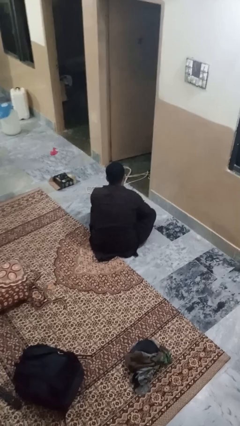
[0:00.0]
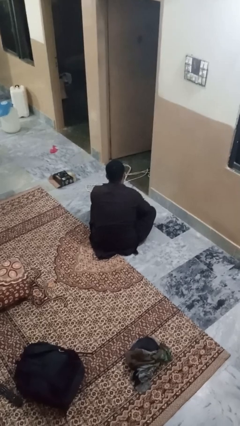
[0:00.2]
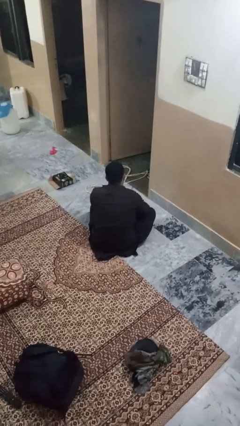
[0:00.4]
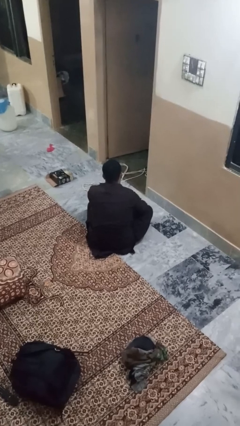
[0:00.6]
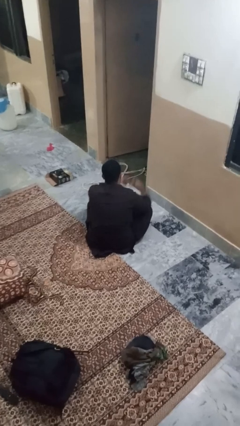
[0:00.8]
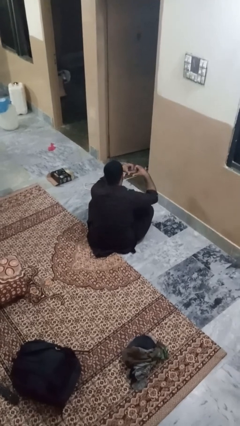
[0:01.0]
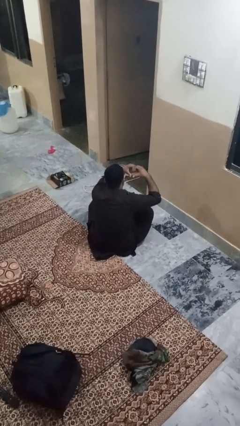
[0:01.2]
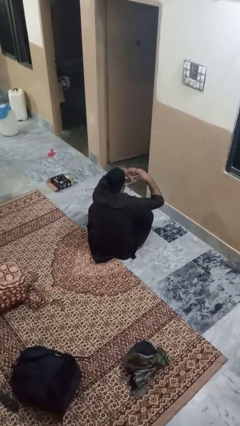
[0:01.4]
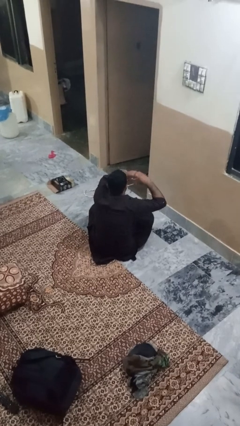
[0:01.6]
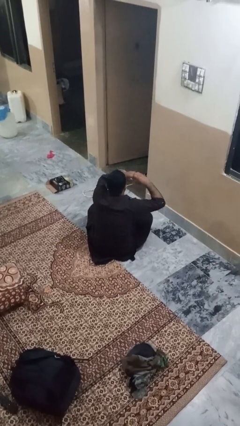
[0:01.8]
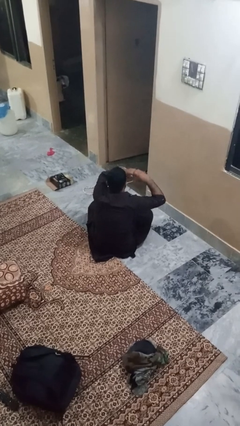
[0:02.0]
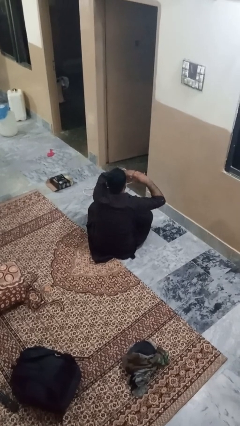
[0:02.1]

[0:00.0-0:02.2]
person gestures heart

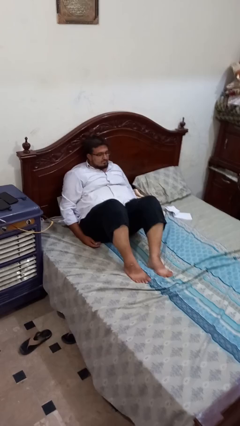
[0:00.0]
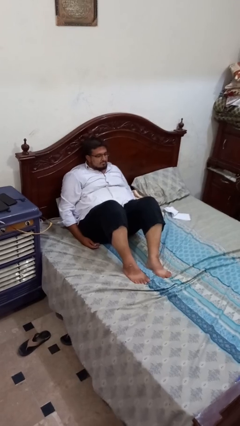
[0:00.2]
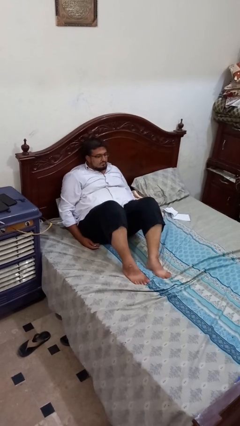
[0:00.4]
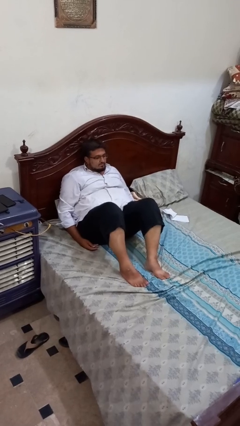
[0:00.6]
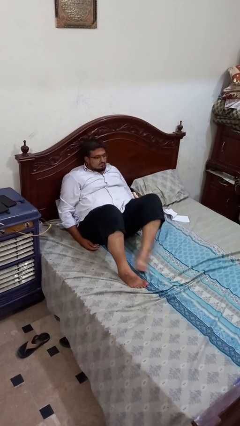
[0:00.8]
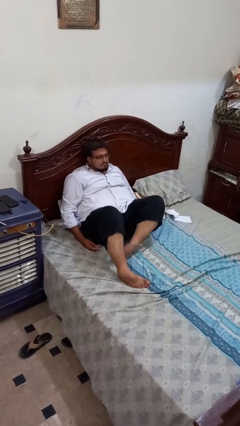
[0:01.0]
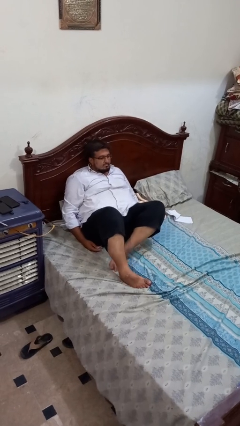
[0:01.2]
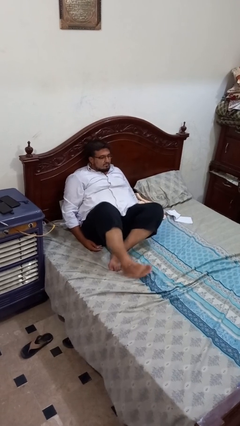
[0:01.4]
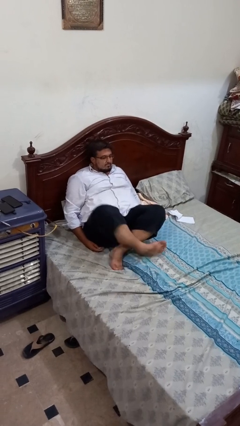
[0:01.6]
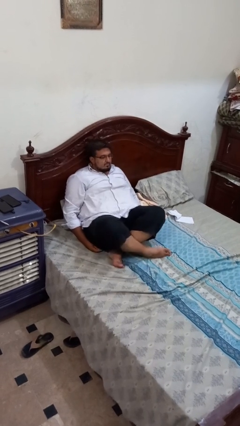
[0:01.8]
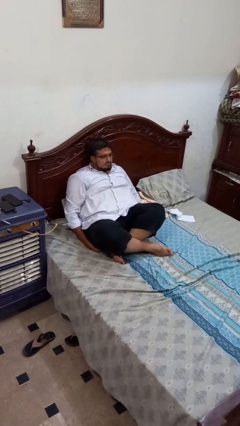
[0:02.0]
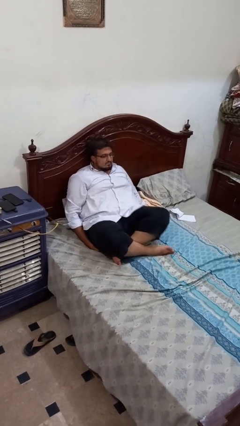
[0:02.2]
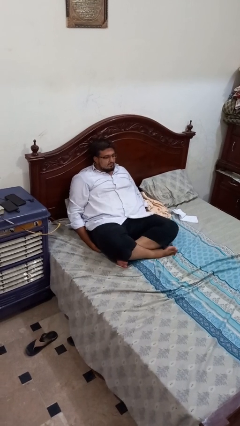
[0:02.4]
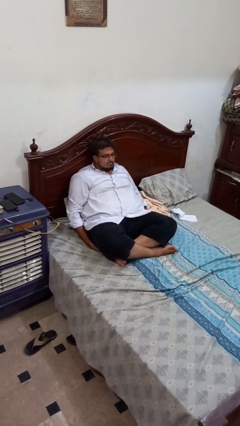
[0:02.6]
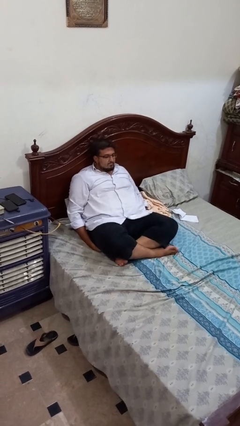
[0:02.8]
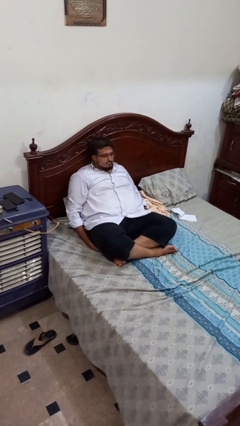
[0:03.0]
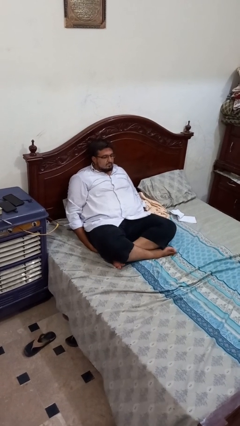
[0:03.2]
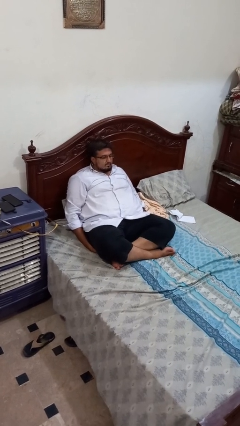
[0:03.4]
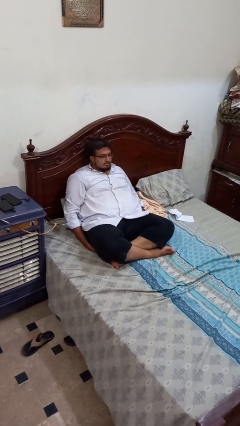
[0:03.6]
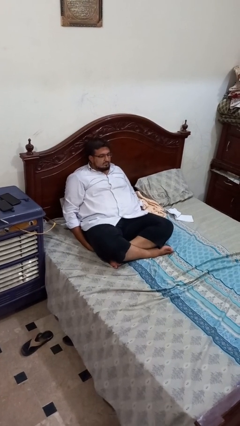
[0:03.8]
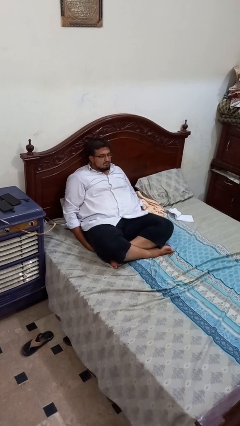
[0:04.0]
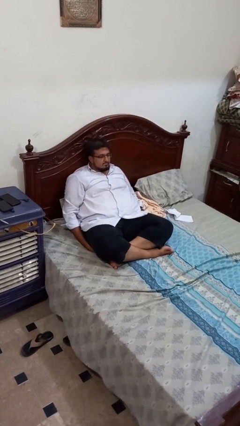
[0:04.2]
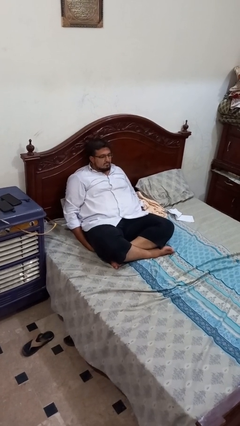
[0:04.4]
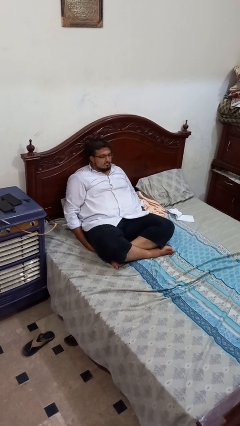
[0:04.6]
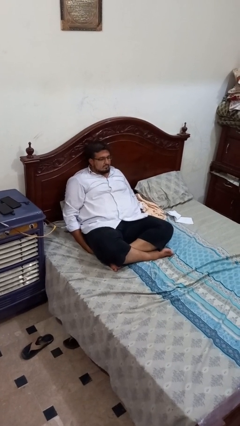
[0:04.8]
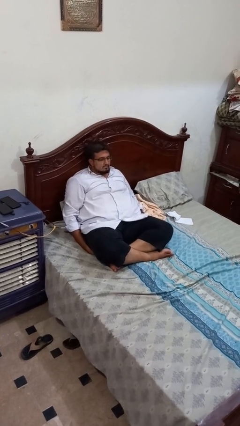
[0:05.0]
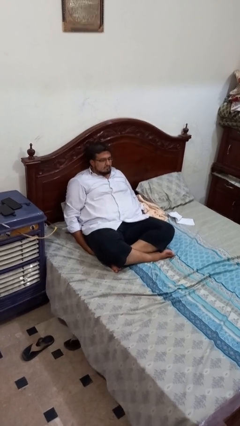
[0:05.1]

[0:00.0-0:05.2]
person crosses legs

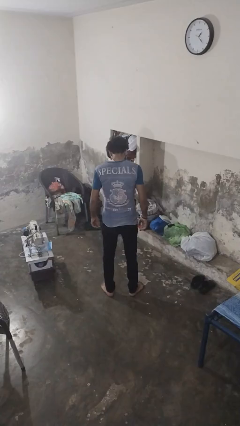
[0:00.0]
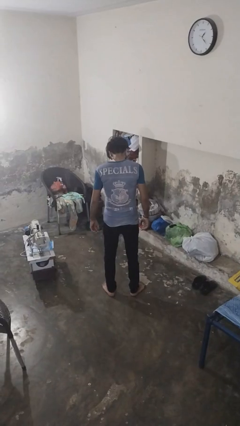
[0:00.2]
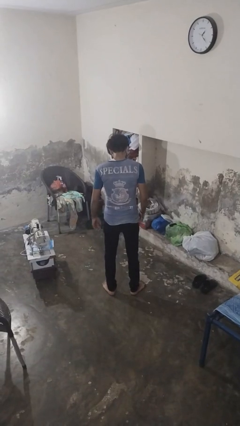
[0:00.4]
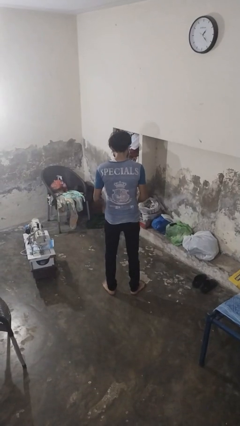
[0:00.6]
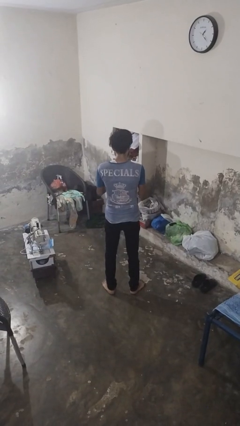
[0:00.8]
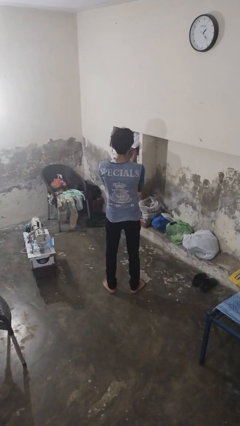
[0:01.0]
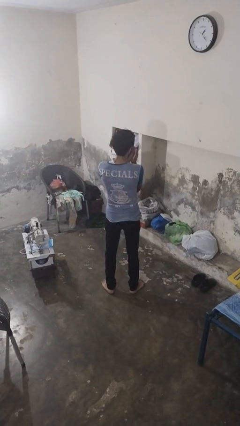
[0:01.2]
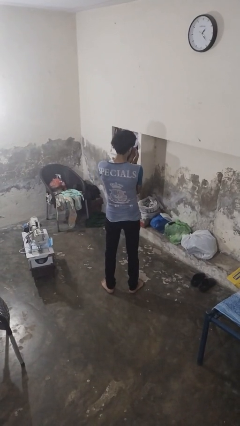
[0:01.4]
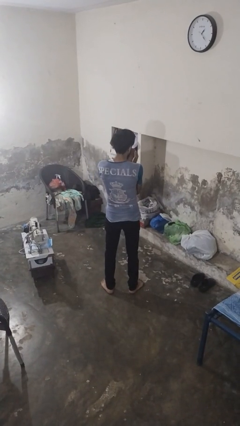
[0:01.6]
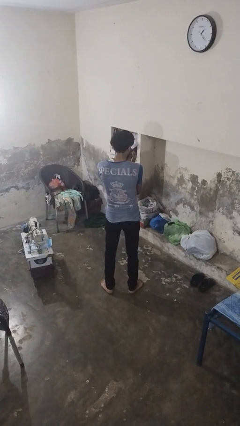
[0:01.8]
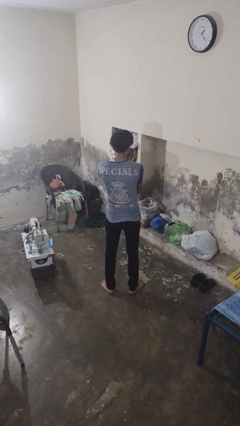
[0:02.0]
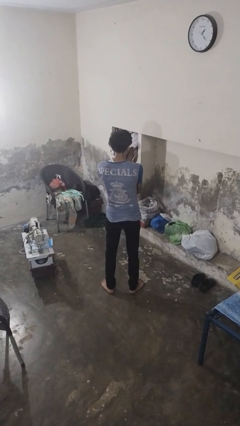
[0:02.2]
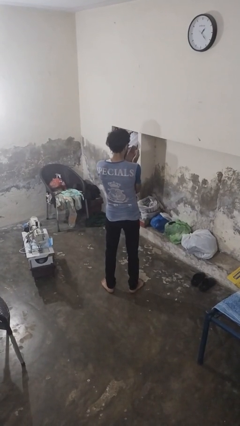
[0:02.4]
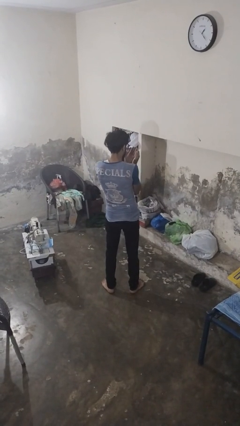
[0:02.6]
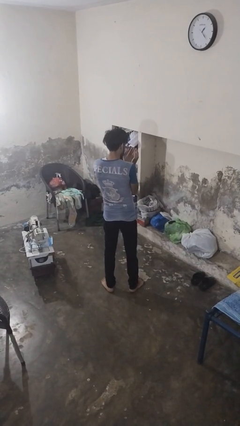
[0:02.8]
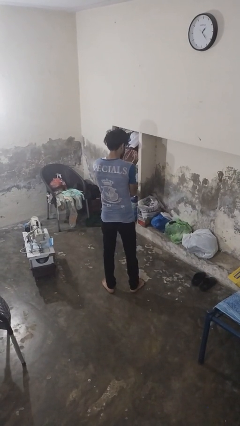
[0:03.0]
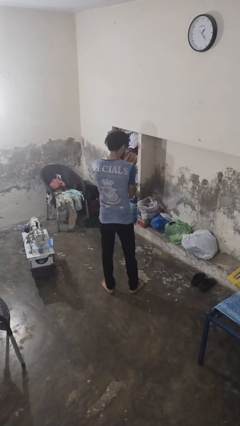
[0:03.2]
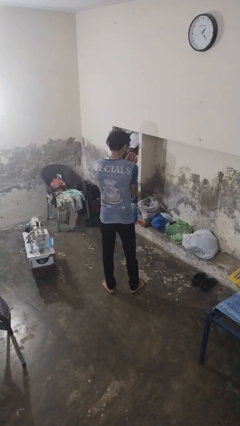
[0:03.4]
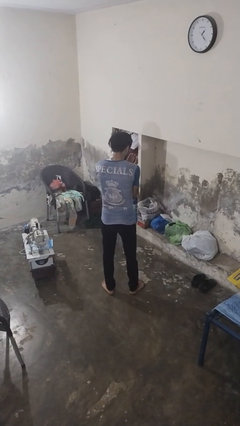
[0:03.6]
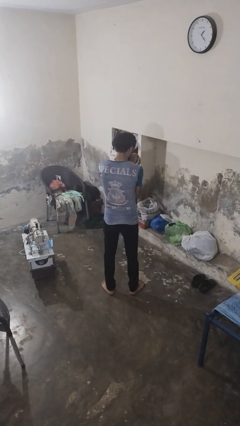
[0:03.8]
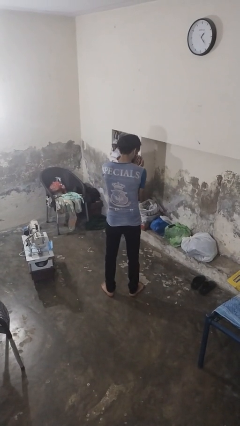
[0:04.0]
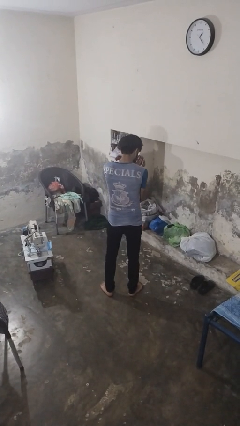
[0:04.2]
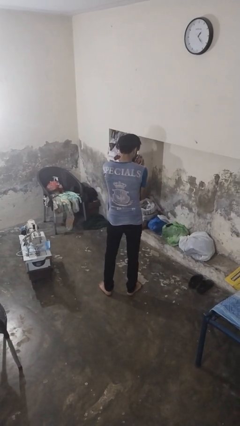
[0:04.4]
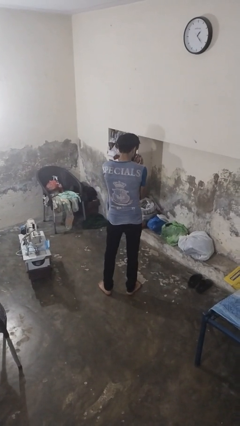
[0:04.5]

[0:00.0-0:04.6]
person prays

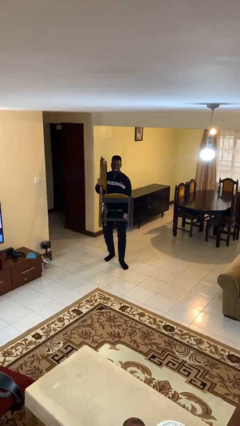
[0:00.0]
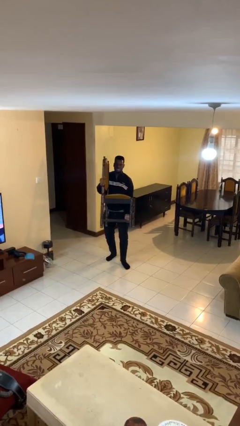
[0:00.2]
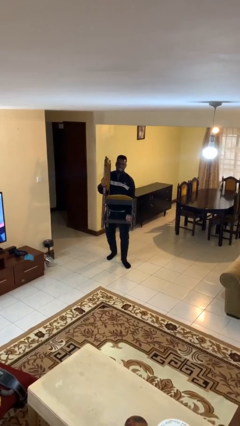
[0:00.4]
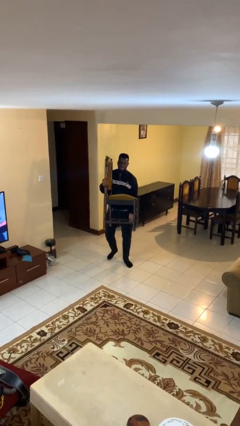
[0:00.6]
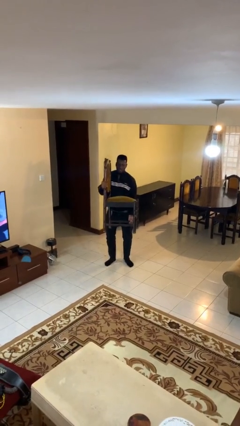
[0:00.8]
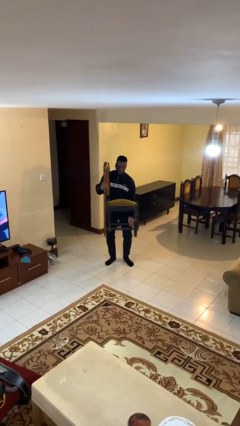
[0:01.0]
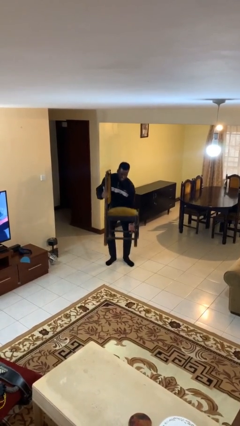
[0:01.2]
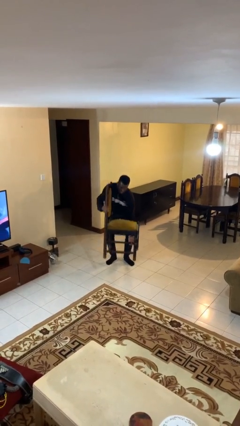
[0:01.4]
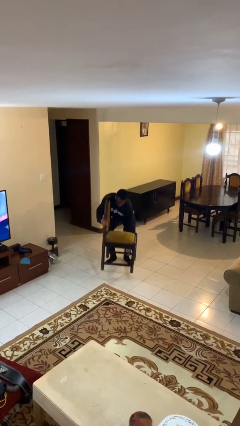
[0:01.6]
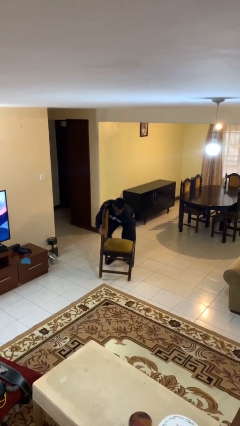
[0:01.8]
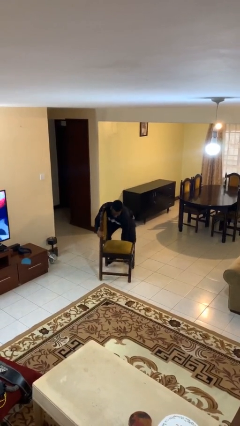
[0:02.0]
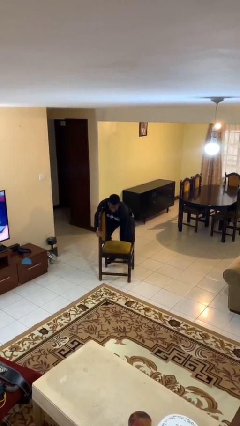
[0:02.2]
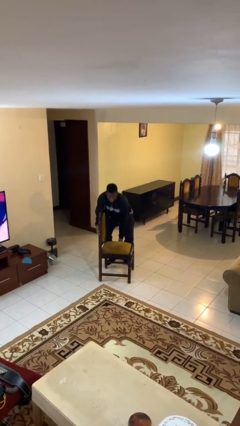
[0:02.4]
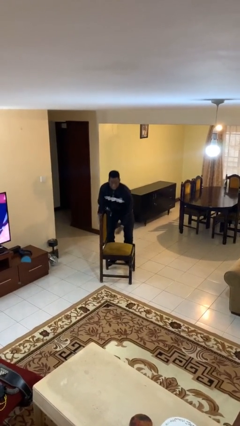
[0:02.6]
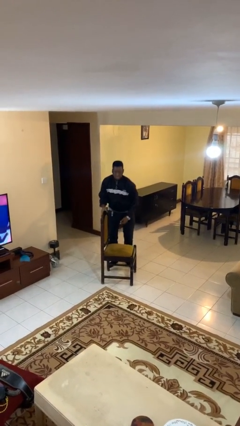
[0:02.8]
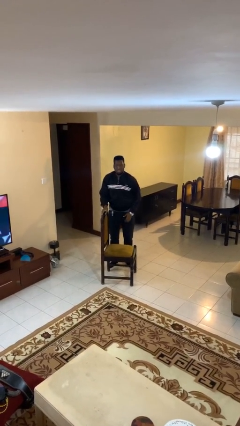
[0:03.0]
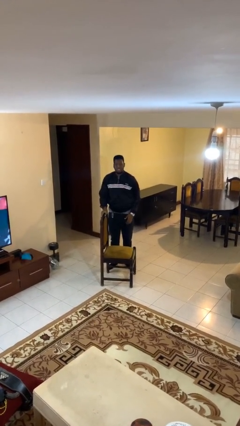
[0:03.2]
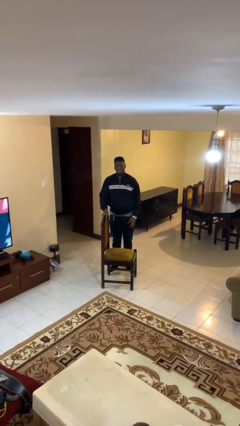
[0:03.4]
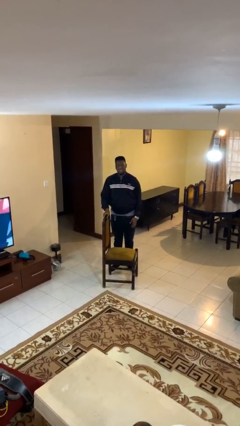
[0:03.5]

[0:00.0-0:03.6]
person puts down object on floor

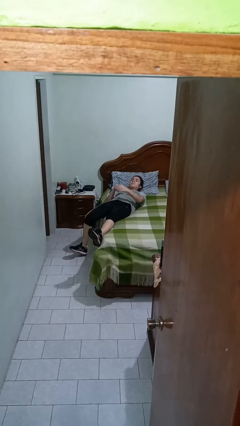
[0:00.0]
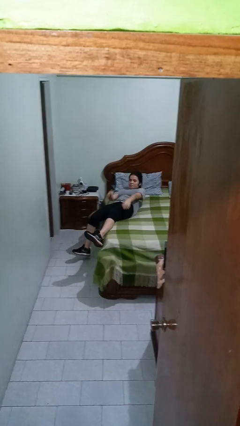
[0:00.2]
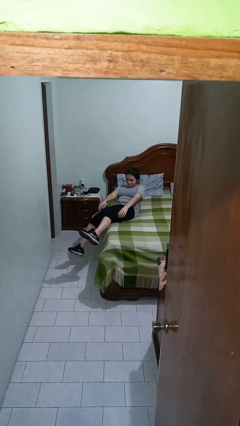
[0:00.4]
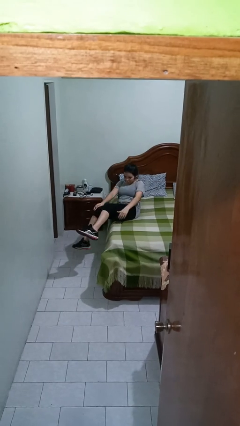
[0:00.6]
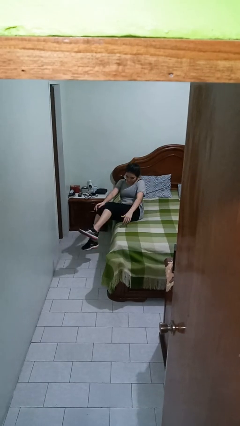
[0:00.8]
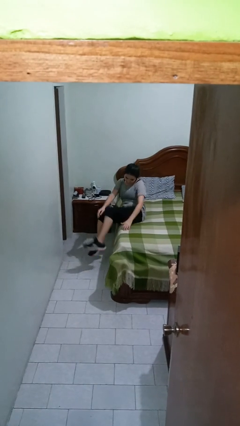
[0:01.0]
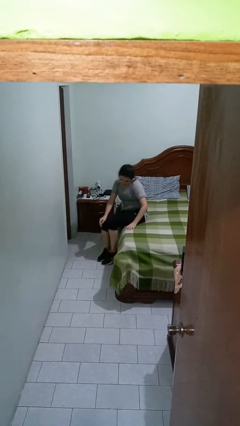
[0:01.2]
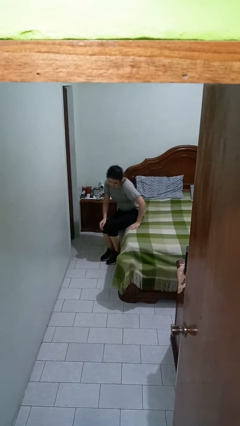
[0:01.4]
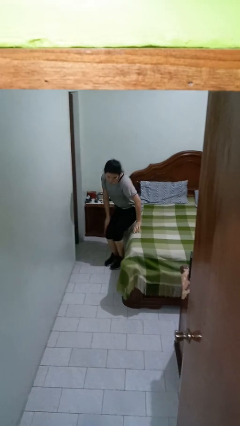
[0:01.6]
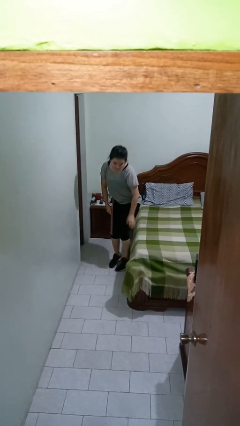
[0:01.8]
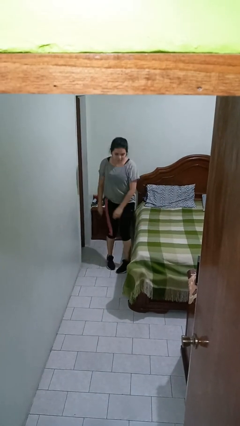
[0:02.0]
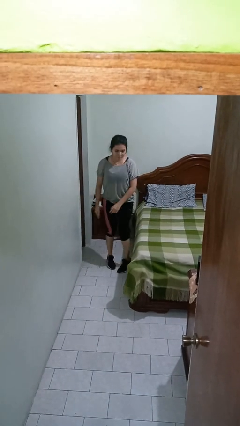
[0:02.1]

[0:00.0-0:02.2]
person stands up
